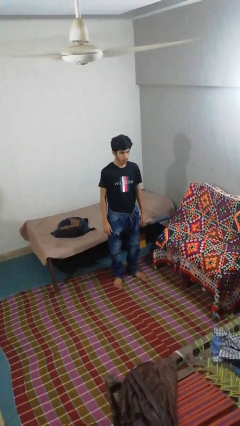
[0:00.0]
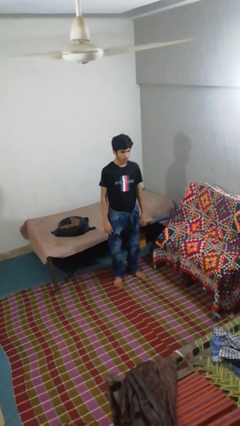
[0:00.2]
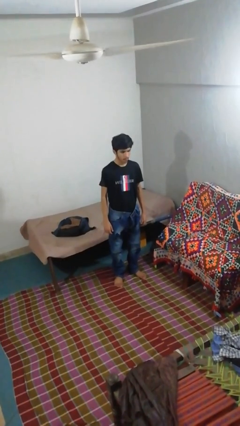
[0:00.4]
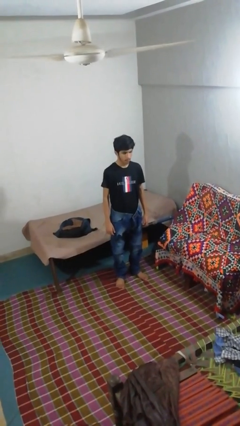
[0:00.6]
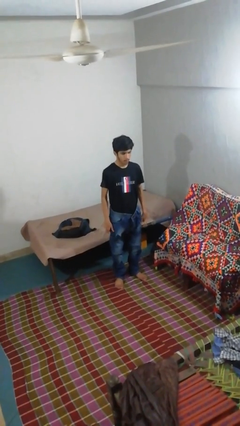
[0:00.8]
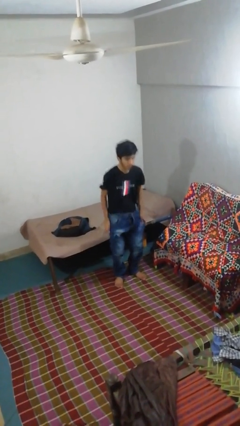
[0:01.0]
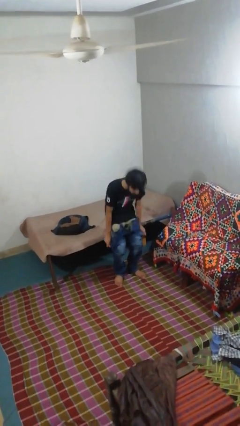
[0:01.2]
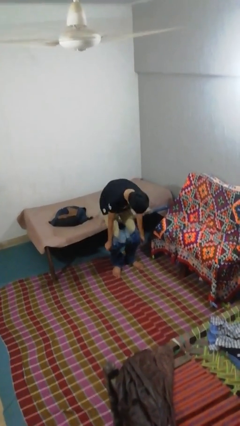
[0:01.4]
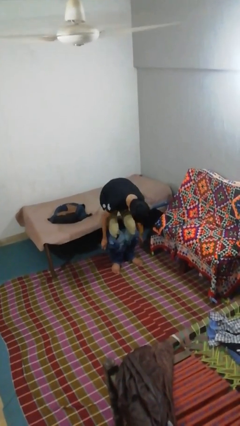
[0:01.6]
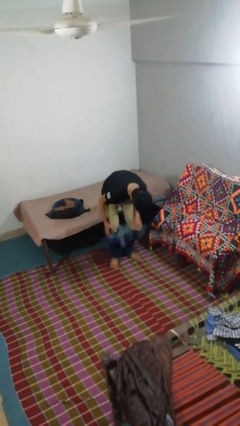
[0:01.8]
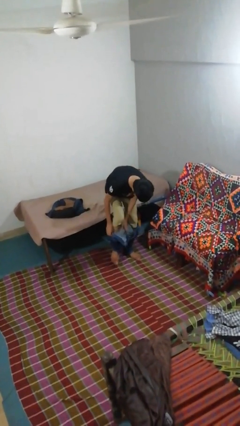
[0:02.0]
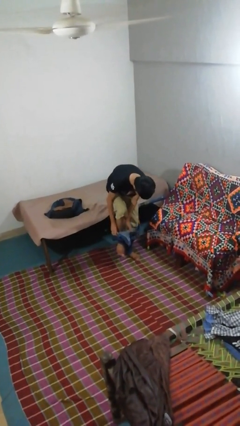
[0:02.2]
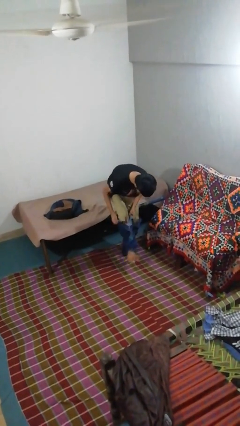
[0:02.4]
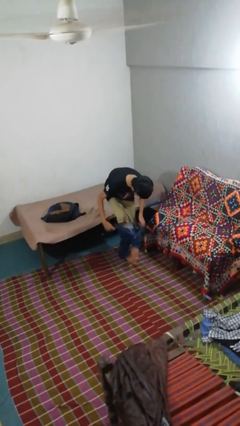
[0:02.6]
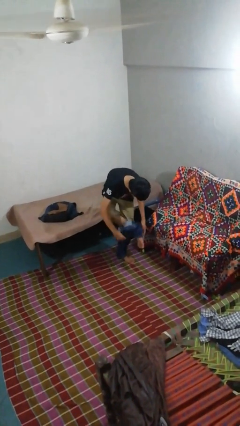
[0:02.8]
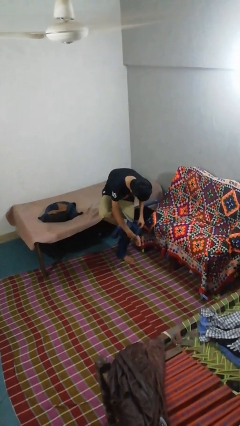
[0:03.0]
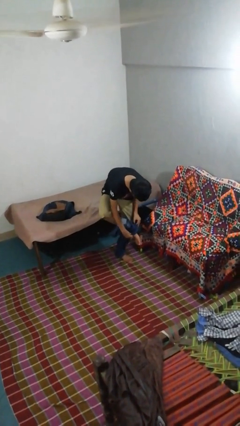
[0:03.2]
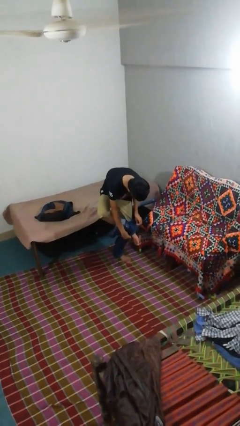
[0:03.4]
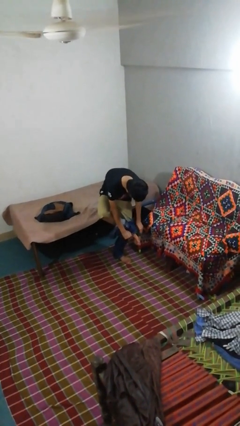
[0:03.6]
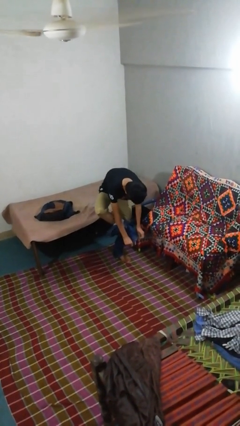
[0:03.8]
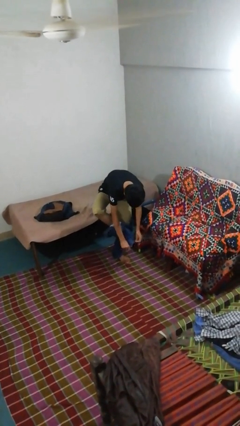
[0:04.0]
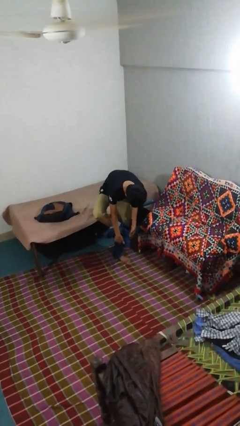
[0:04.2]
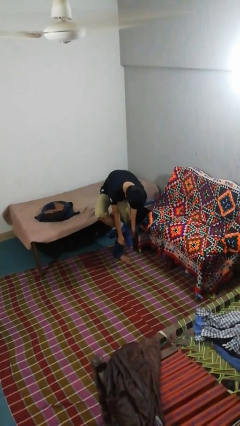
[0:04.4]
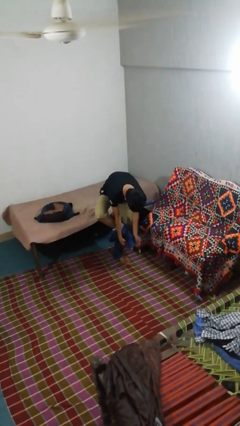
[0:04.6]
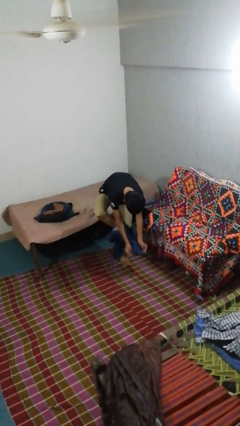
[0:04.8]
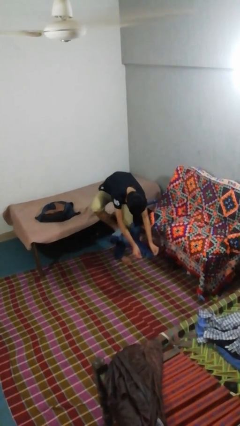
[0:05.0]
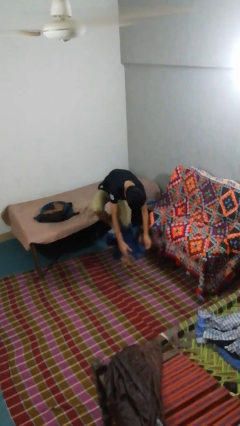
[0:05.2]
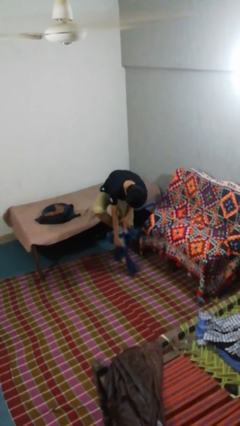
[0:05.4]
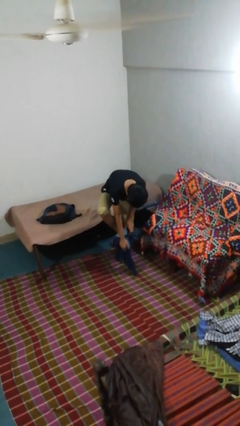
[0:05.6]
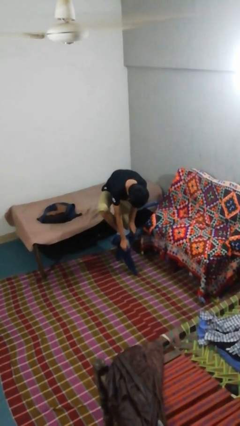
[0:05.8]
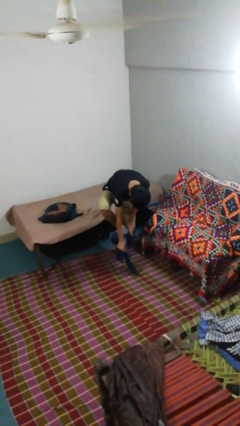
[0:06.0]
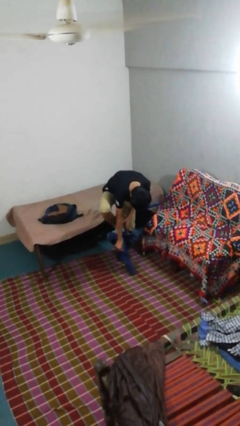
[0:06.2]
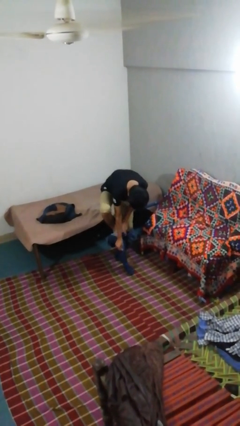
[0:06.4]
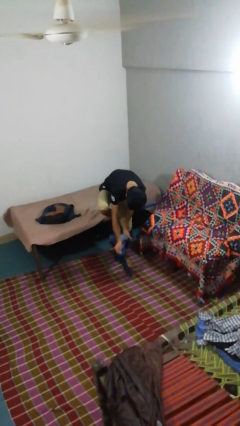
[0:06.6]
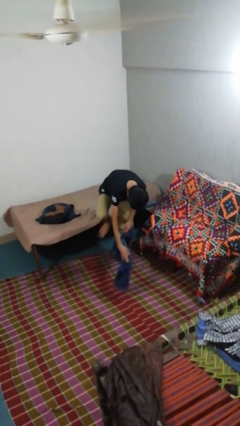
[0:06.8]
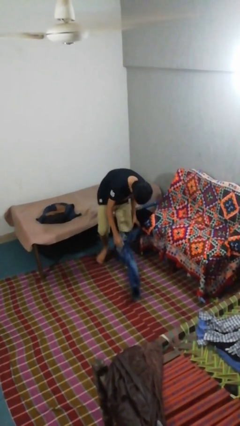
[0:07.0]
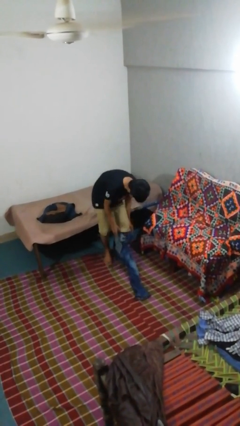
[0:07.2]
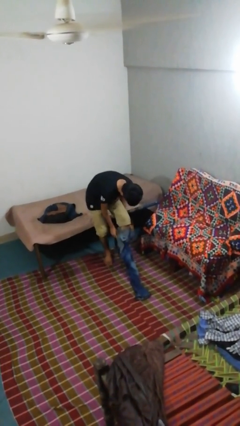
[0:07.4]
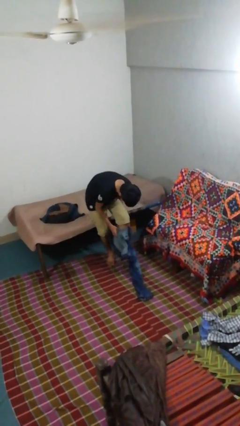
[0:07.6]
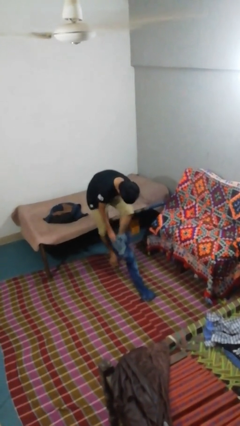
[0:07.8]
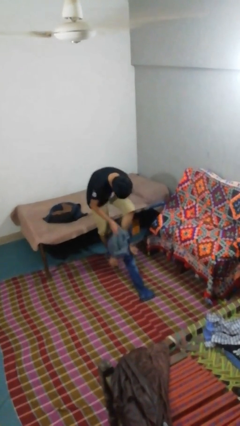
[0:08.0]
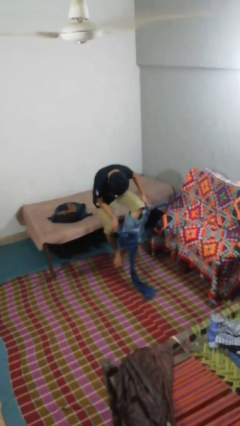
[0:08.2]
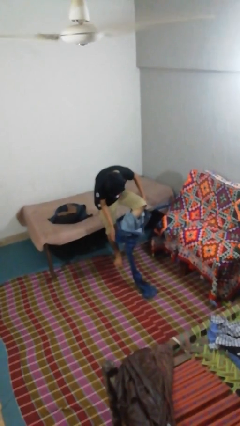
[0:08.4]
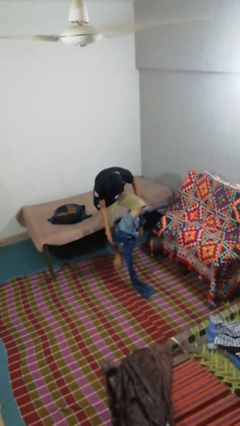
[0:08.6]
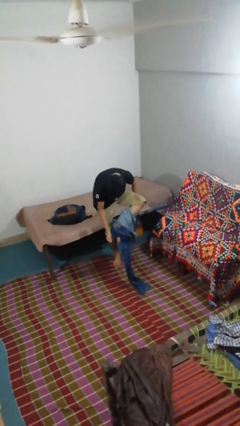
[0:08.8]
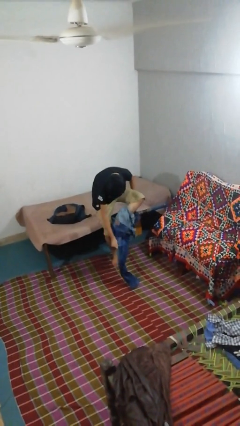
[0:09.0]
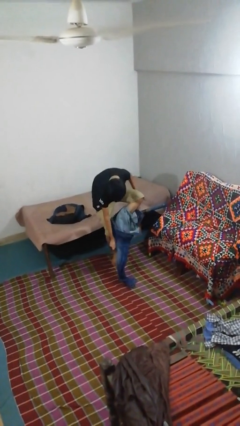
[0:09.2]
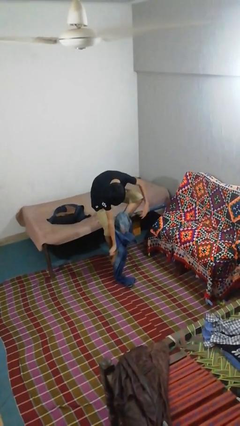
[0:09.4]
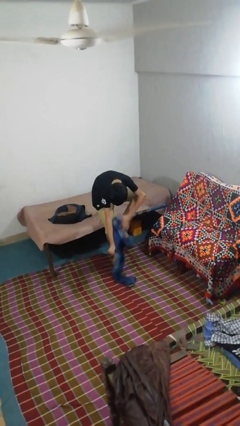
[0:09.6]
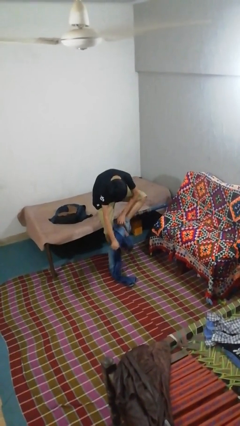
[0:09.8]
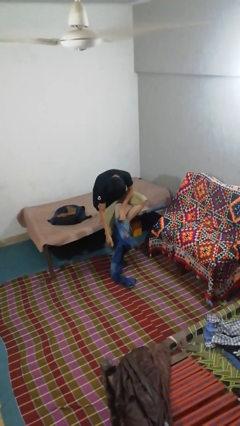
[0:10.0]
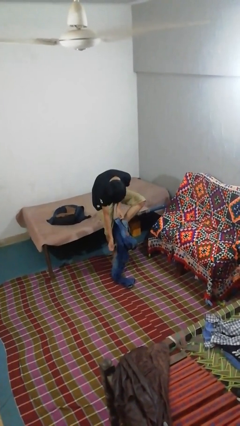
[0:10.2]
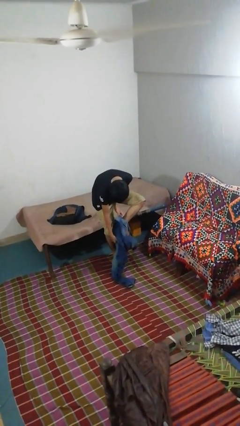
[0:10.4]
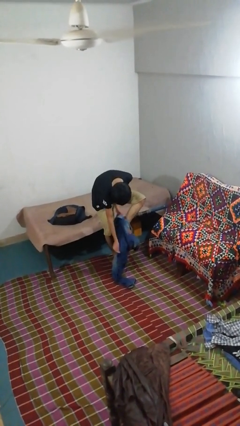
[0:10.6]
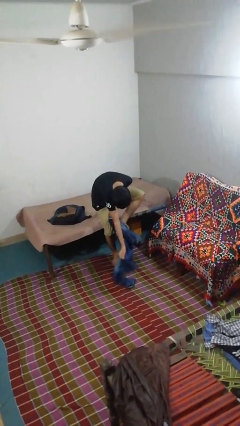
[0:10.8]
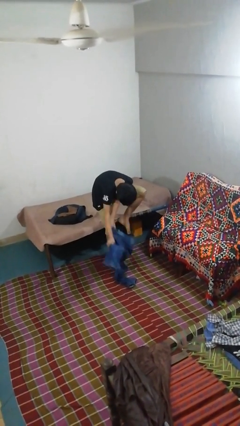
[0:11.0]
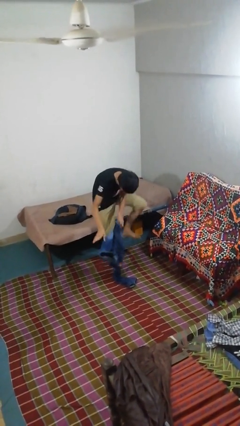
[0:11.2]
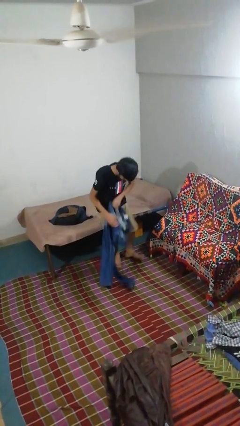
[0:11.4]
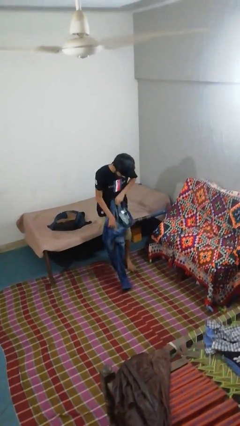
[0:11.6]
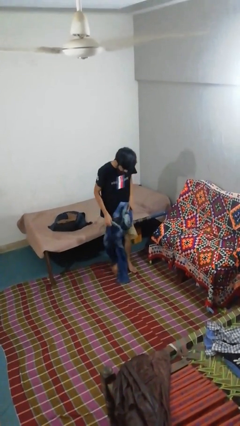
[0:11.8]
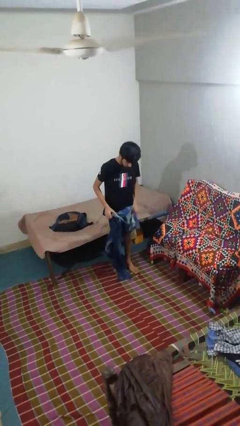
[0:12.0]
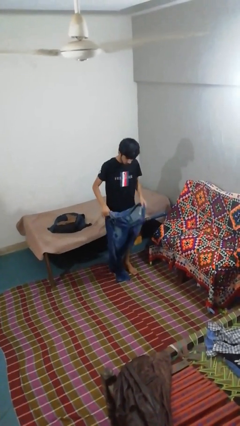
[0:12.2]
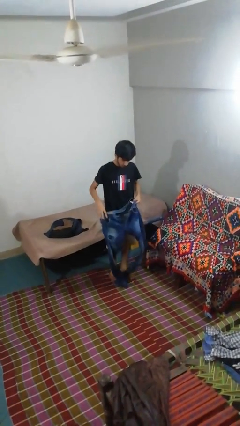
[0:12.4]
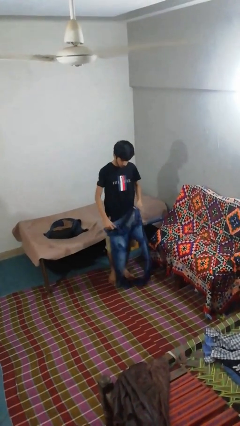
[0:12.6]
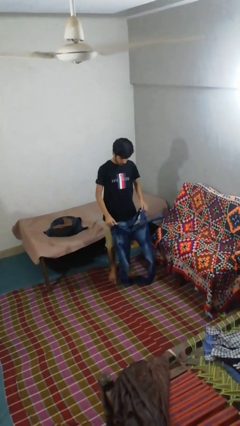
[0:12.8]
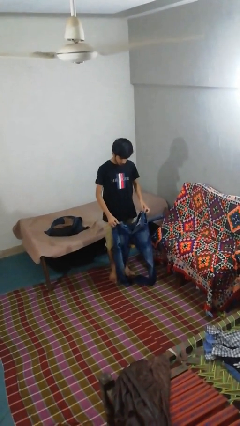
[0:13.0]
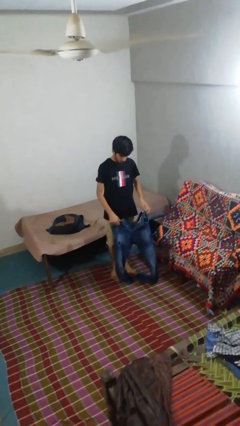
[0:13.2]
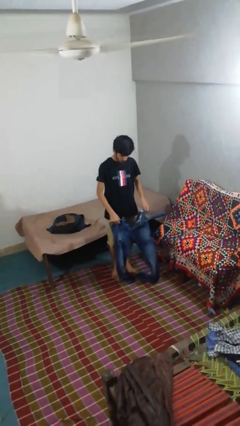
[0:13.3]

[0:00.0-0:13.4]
person takes off pants

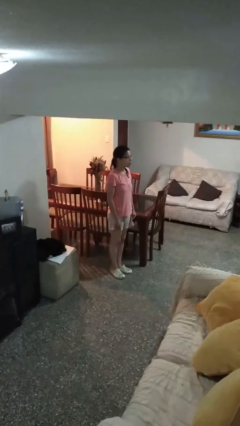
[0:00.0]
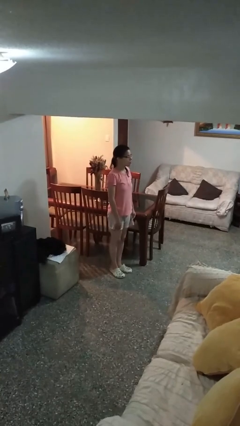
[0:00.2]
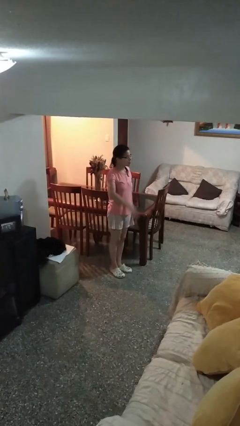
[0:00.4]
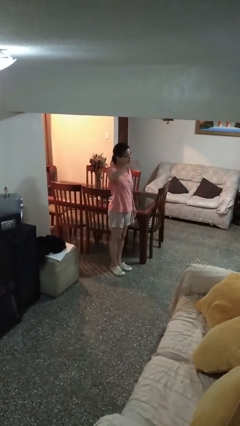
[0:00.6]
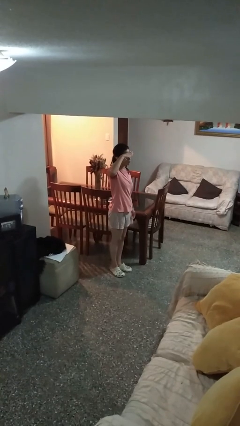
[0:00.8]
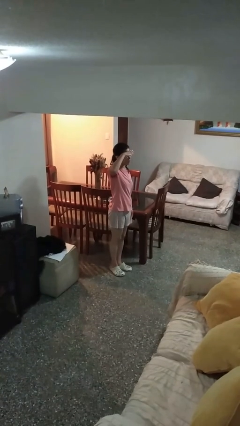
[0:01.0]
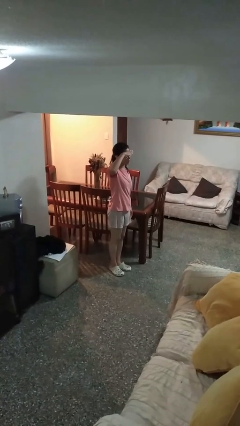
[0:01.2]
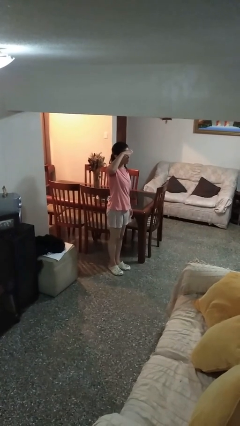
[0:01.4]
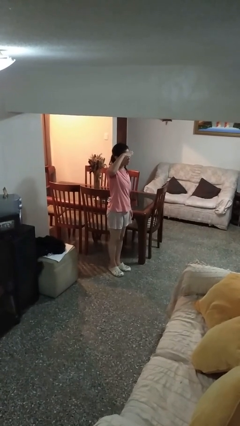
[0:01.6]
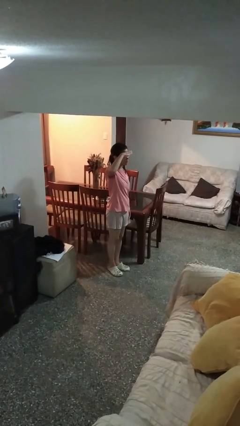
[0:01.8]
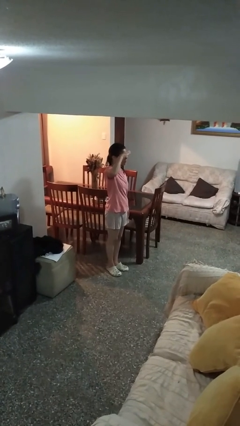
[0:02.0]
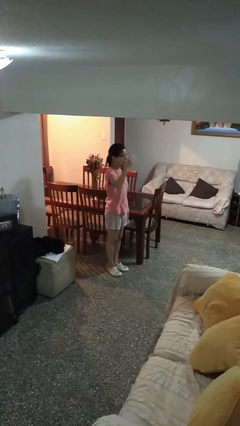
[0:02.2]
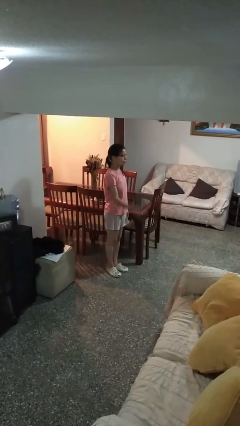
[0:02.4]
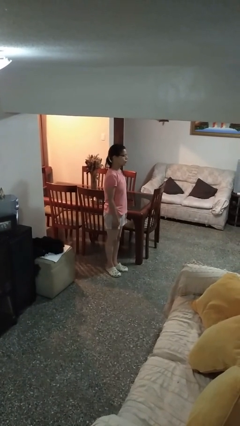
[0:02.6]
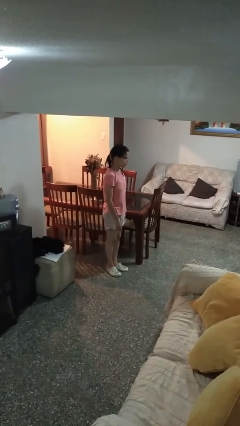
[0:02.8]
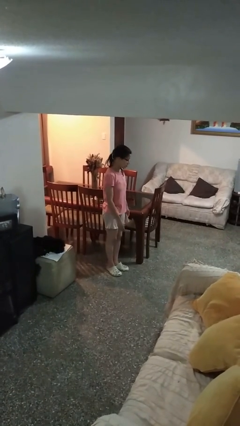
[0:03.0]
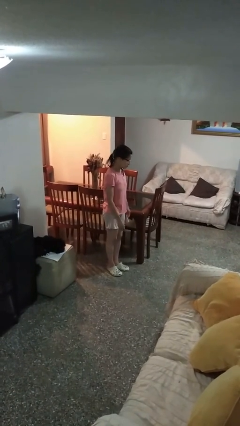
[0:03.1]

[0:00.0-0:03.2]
person salutes

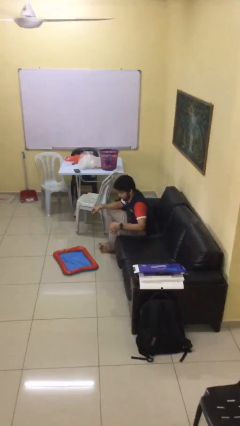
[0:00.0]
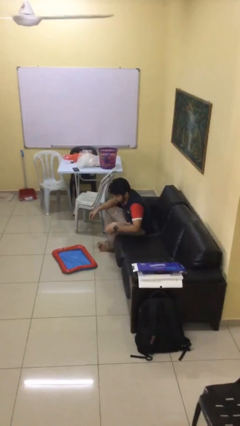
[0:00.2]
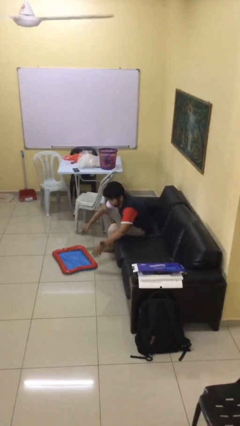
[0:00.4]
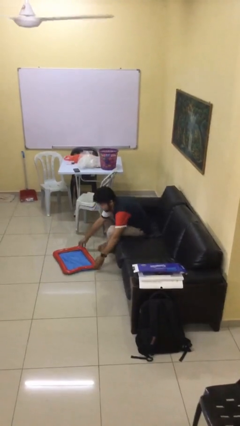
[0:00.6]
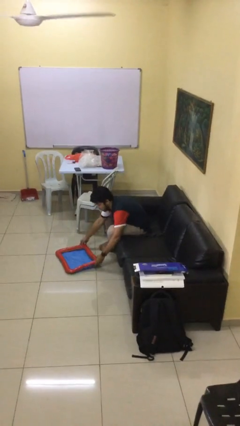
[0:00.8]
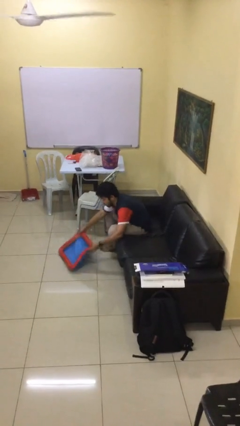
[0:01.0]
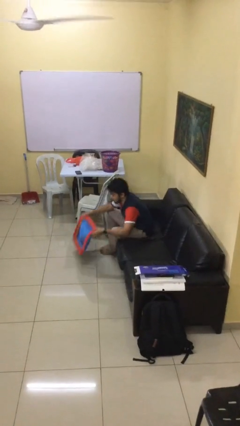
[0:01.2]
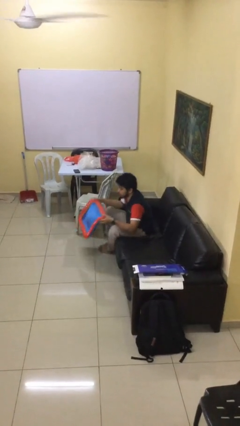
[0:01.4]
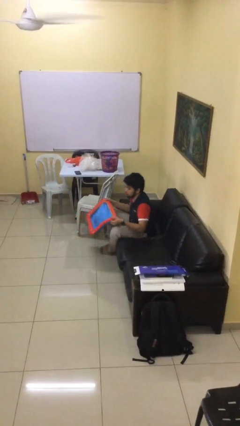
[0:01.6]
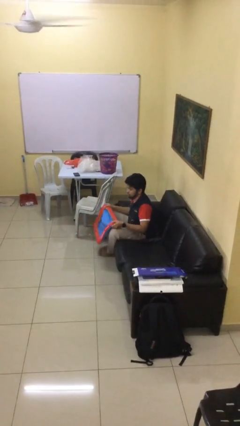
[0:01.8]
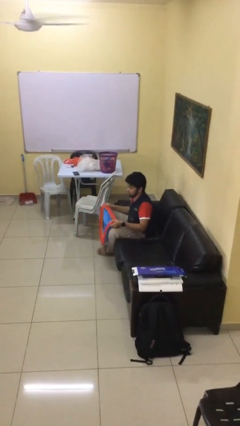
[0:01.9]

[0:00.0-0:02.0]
person picks up object from floor
